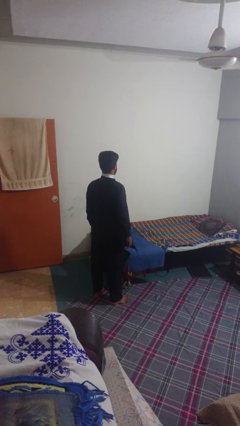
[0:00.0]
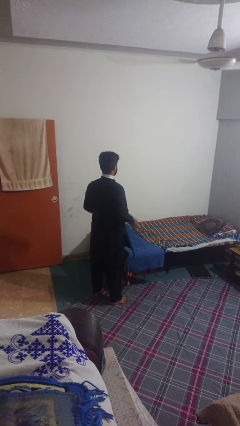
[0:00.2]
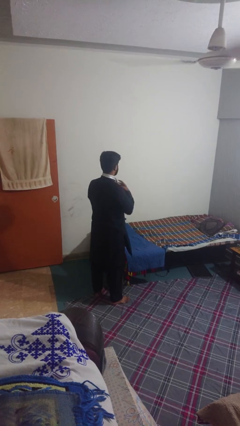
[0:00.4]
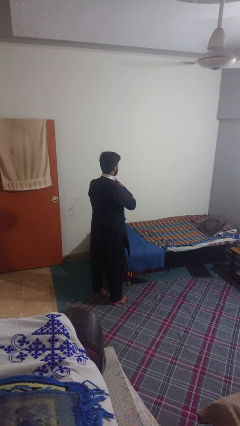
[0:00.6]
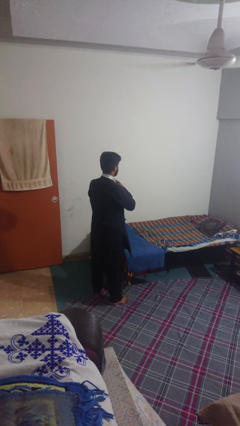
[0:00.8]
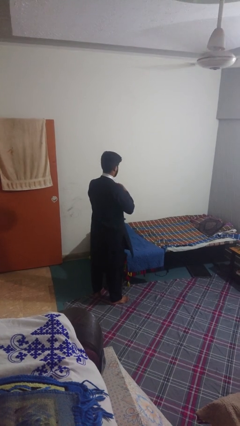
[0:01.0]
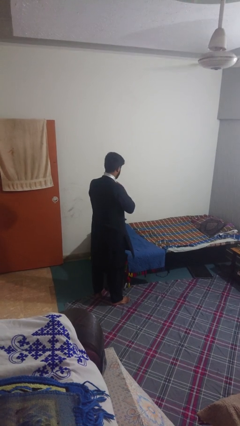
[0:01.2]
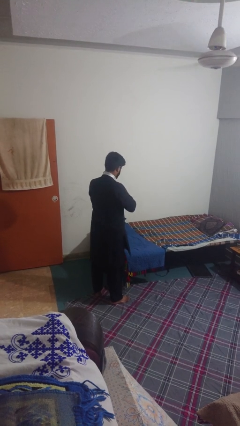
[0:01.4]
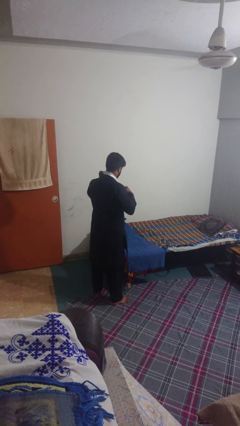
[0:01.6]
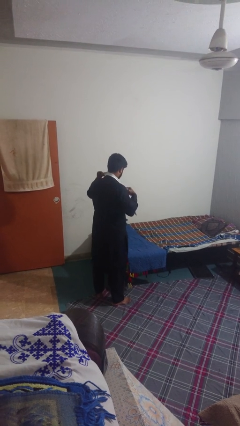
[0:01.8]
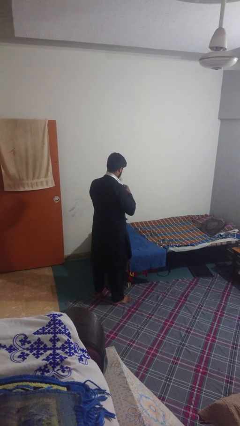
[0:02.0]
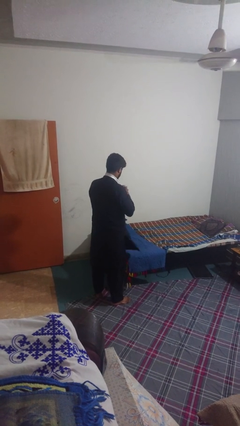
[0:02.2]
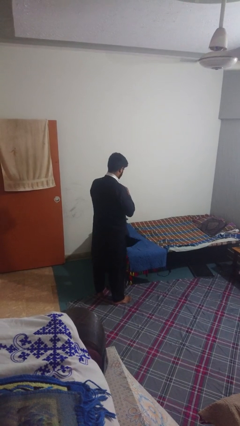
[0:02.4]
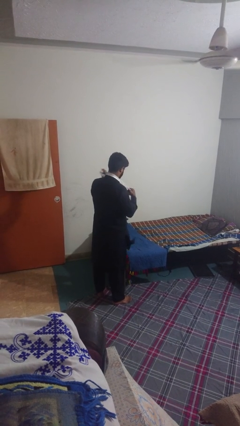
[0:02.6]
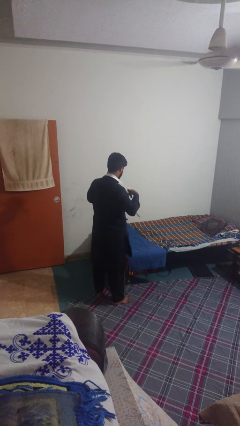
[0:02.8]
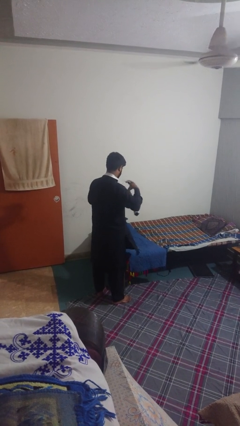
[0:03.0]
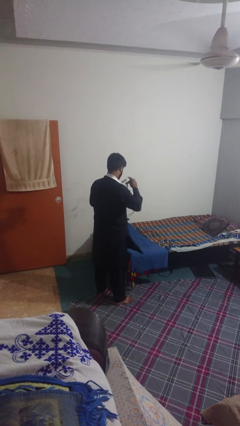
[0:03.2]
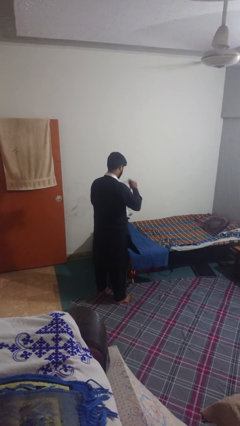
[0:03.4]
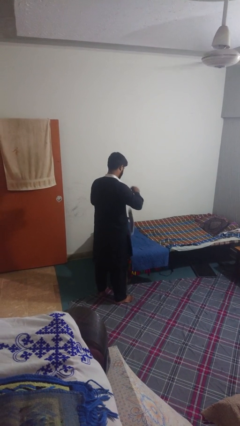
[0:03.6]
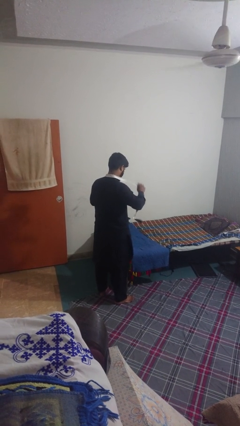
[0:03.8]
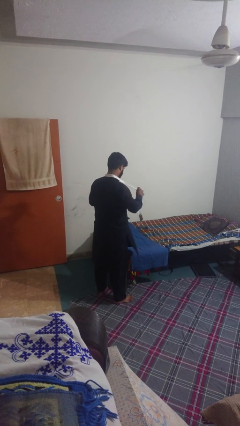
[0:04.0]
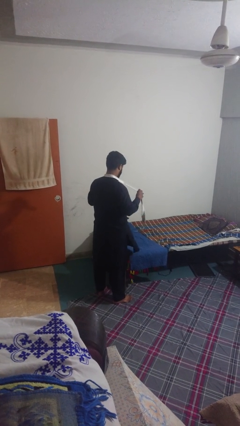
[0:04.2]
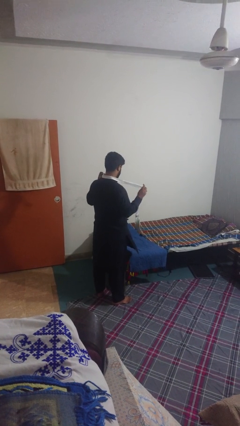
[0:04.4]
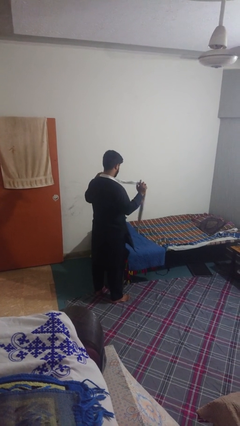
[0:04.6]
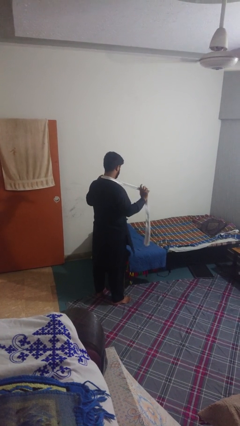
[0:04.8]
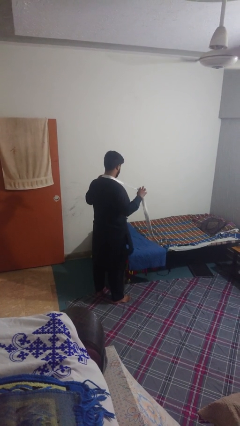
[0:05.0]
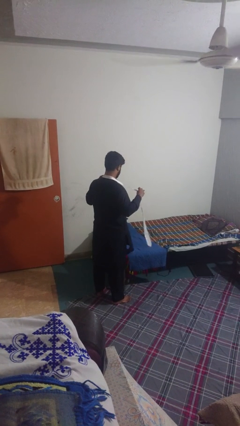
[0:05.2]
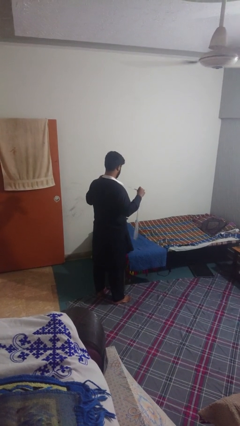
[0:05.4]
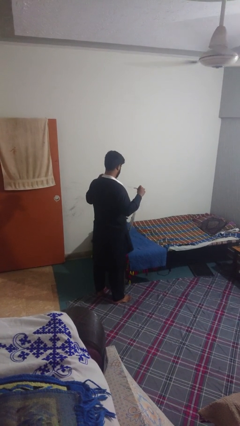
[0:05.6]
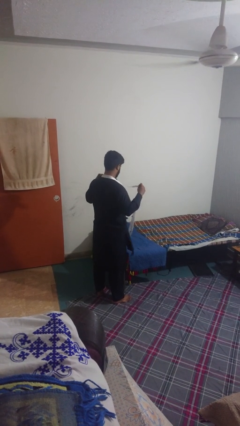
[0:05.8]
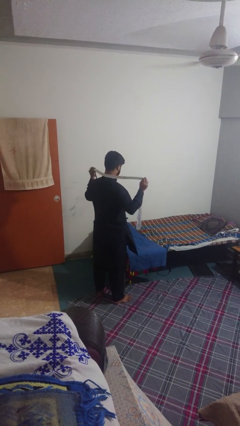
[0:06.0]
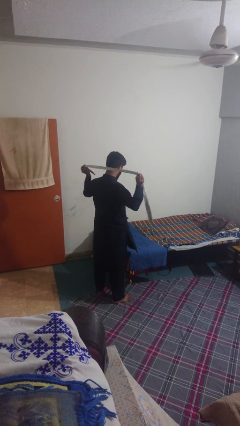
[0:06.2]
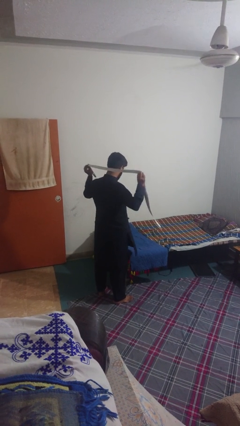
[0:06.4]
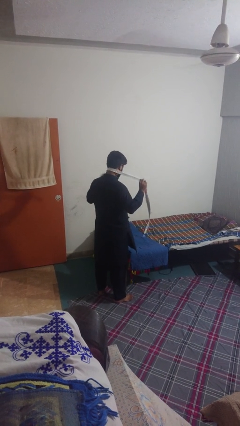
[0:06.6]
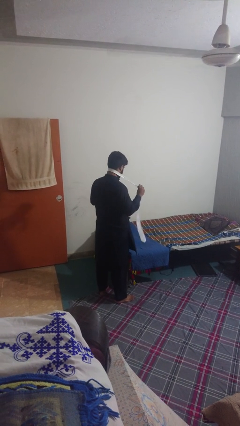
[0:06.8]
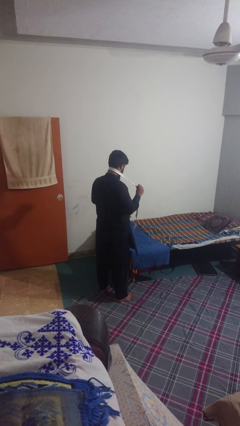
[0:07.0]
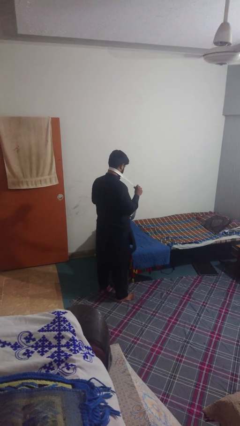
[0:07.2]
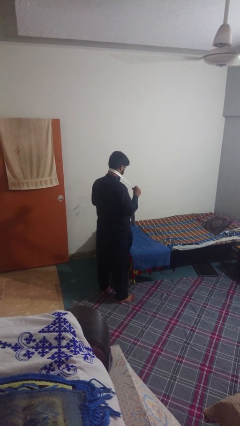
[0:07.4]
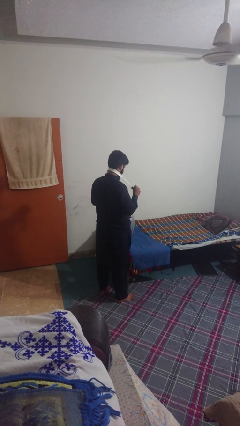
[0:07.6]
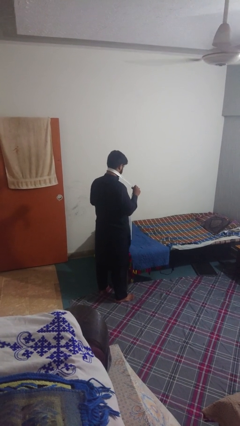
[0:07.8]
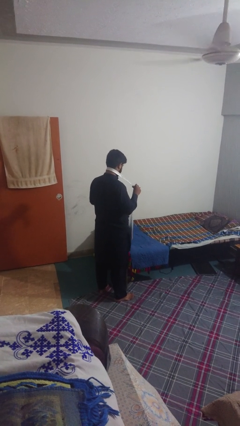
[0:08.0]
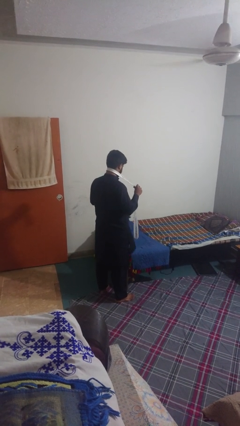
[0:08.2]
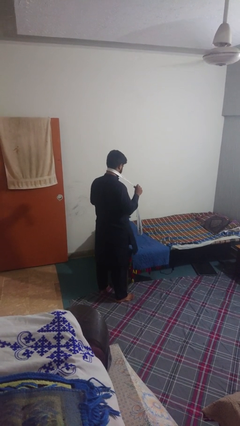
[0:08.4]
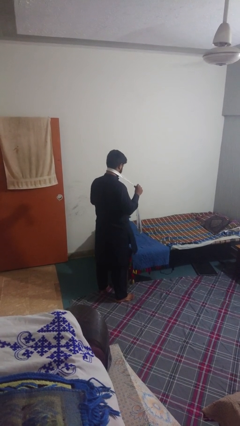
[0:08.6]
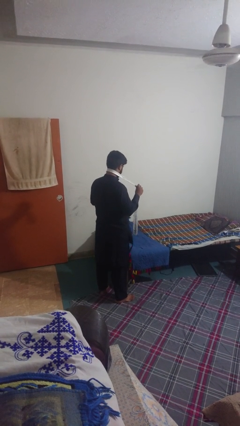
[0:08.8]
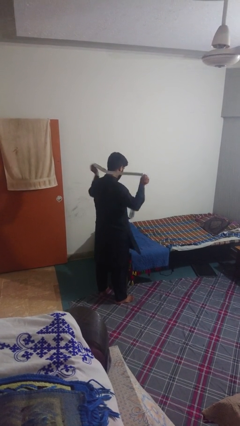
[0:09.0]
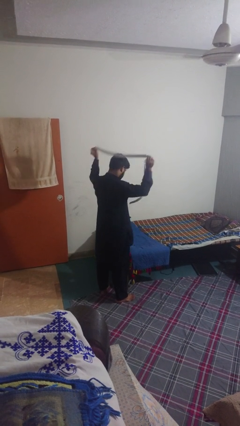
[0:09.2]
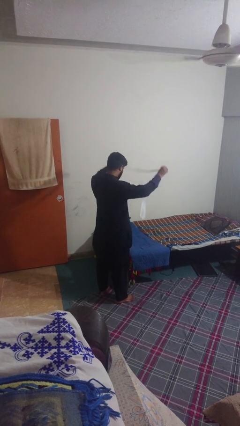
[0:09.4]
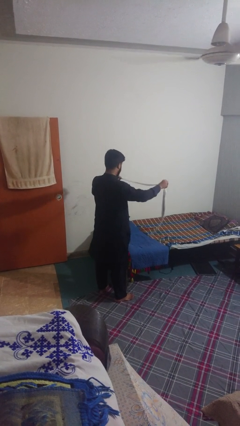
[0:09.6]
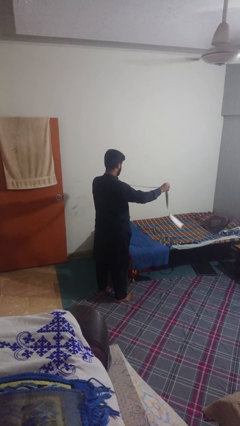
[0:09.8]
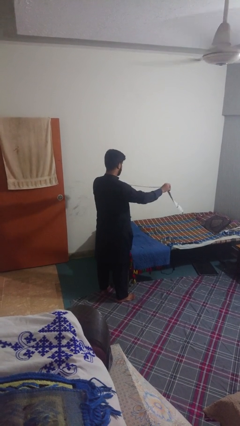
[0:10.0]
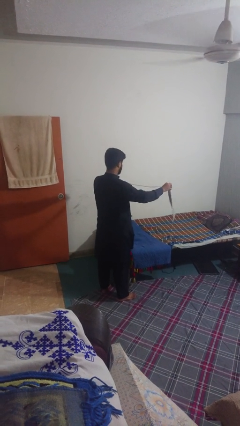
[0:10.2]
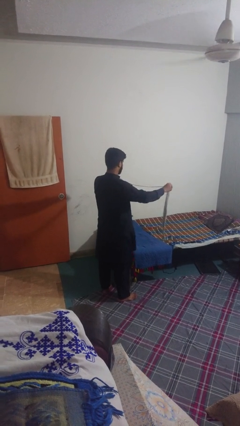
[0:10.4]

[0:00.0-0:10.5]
person takes off necktie

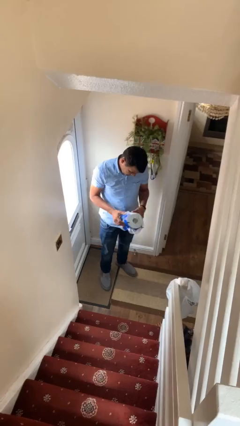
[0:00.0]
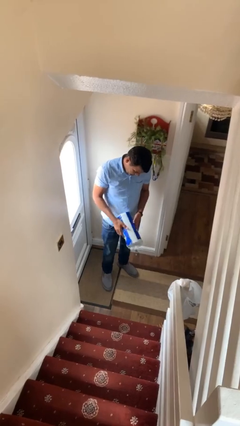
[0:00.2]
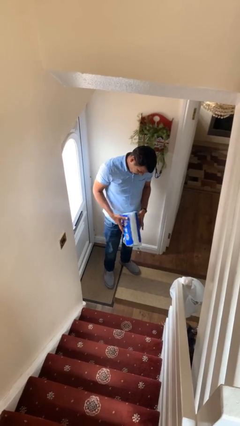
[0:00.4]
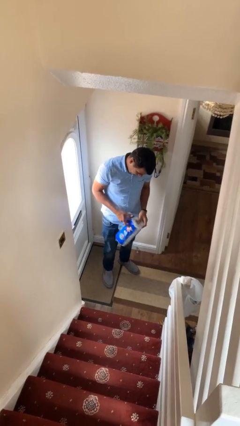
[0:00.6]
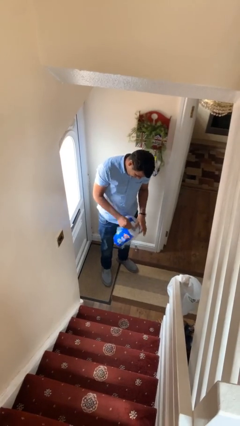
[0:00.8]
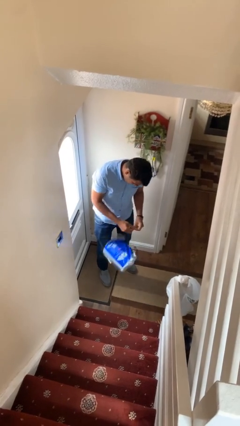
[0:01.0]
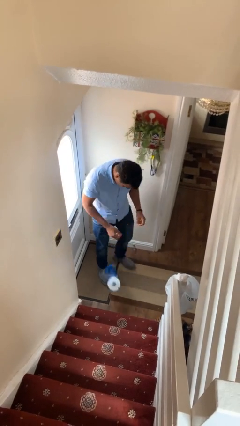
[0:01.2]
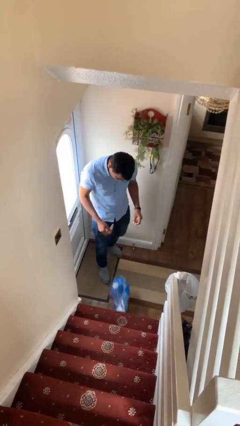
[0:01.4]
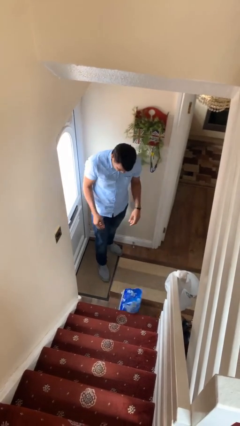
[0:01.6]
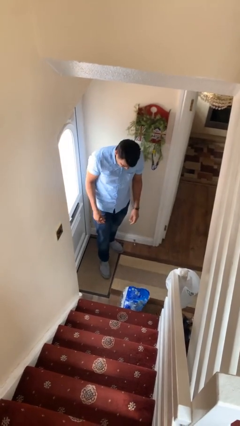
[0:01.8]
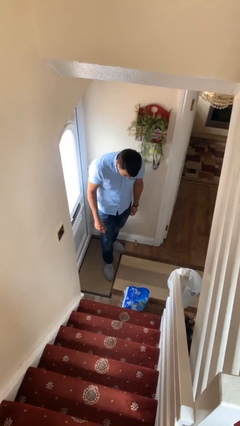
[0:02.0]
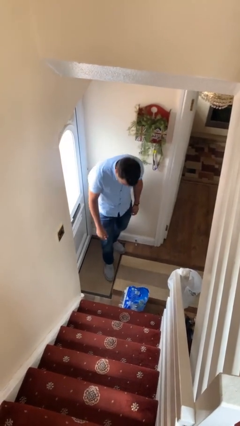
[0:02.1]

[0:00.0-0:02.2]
person drops object

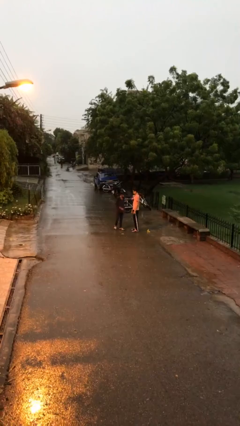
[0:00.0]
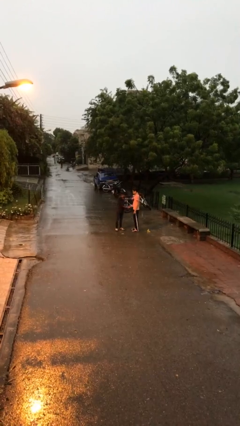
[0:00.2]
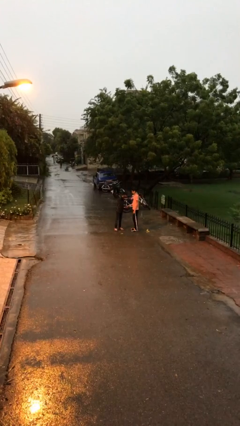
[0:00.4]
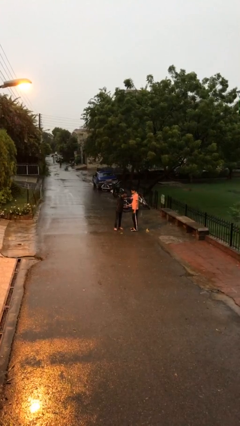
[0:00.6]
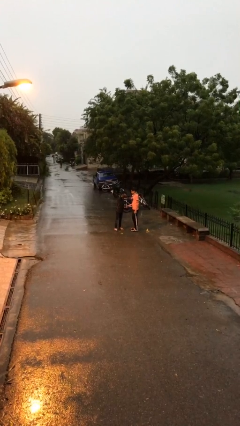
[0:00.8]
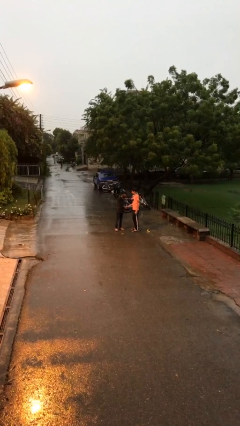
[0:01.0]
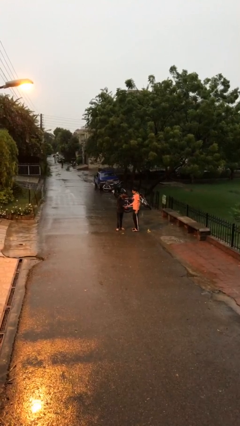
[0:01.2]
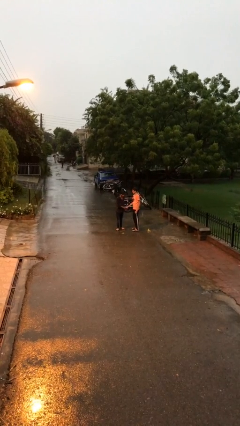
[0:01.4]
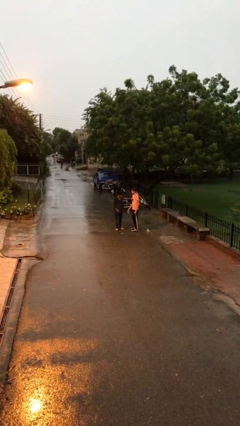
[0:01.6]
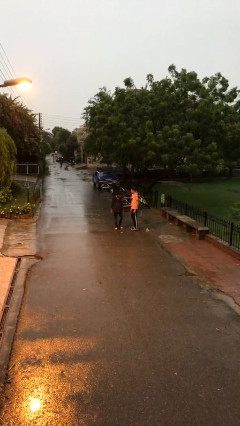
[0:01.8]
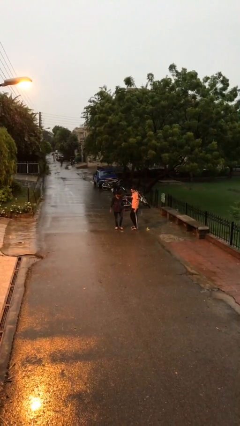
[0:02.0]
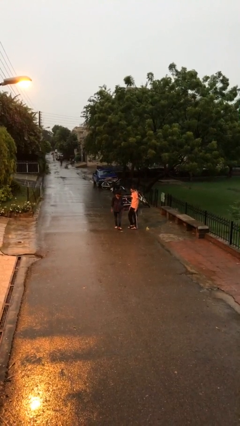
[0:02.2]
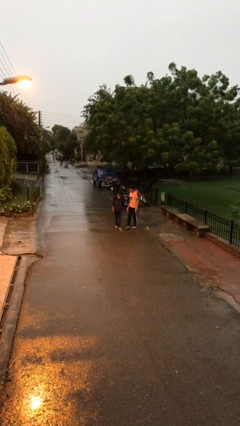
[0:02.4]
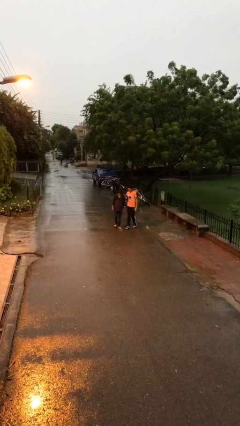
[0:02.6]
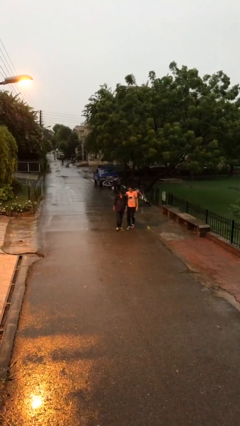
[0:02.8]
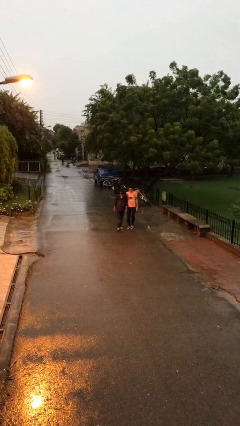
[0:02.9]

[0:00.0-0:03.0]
person shakes hand

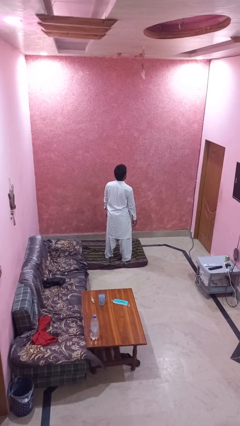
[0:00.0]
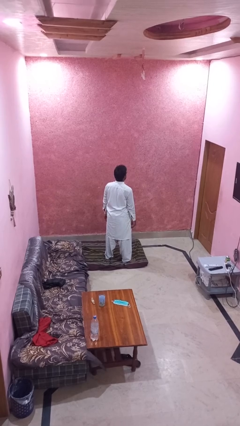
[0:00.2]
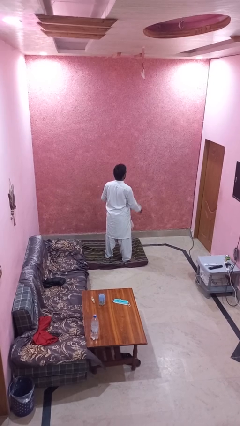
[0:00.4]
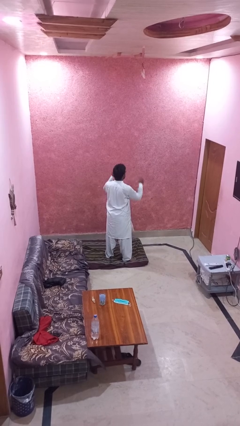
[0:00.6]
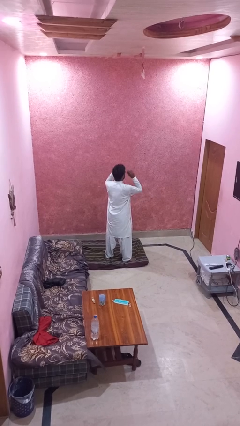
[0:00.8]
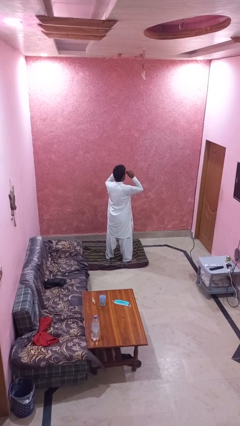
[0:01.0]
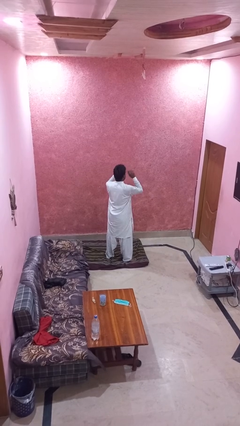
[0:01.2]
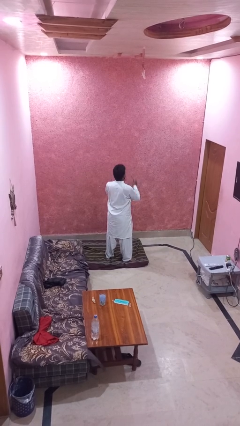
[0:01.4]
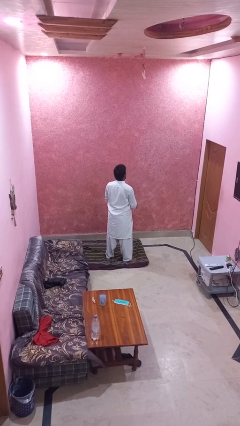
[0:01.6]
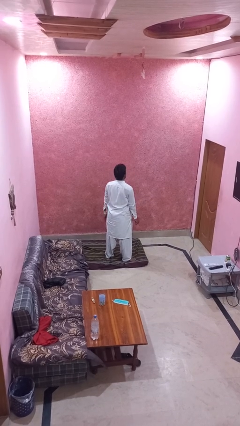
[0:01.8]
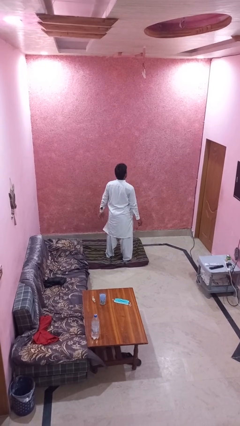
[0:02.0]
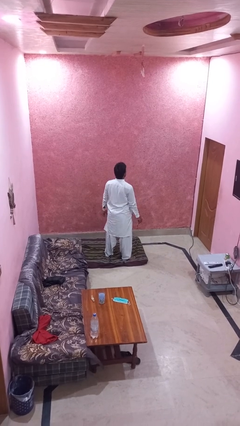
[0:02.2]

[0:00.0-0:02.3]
person takes off glasses
